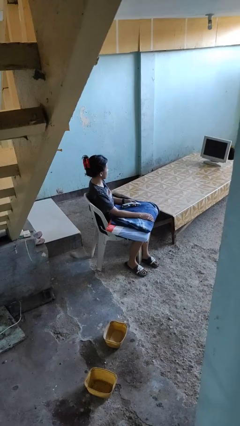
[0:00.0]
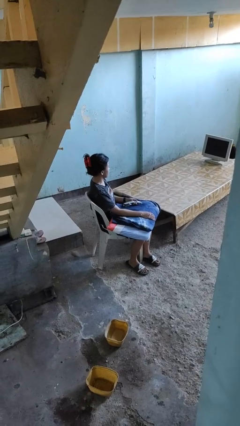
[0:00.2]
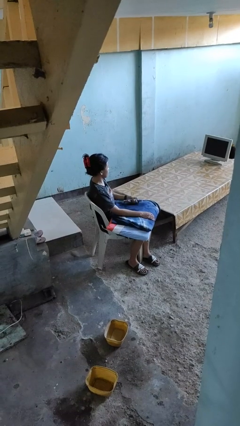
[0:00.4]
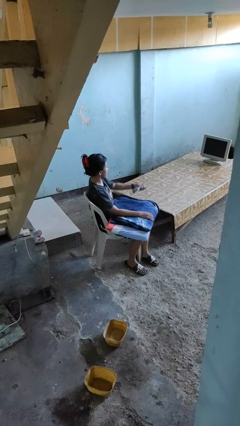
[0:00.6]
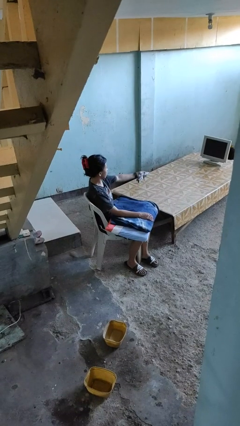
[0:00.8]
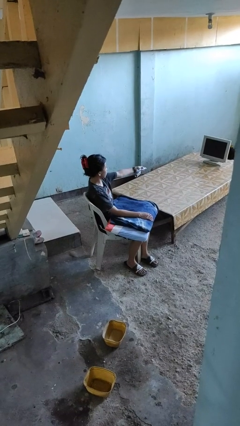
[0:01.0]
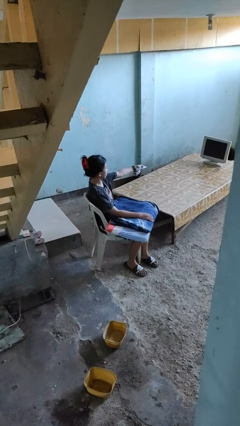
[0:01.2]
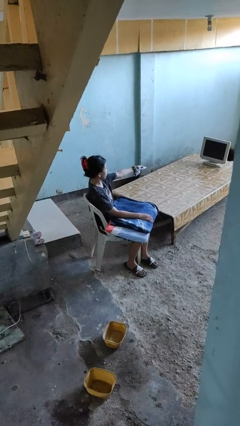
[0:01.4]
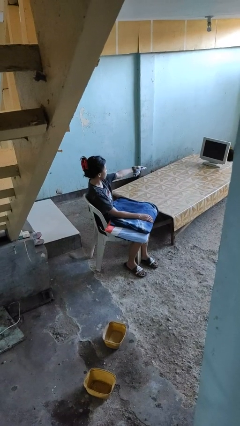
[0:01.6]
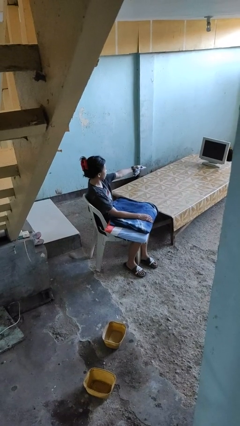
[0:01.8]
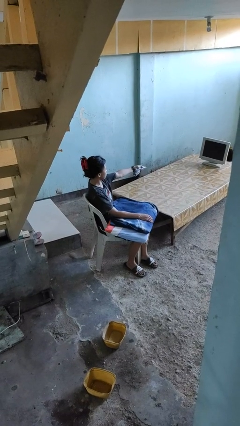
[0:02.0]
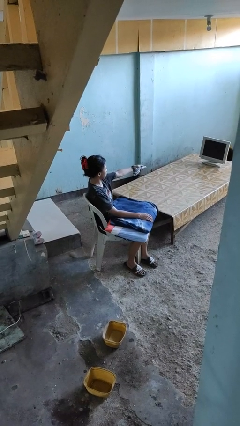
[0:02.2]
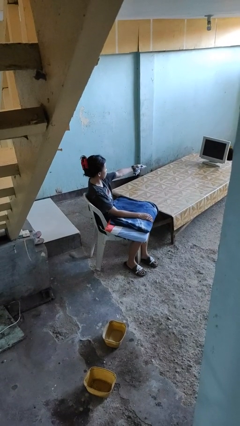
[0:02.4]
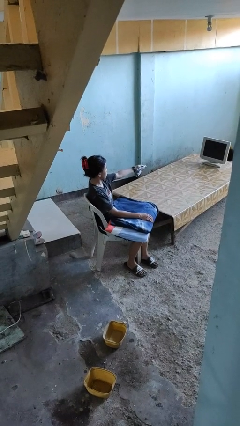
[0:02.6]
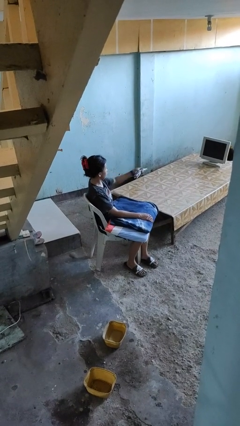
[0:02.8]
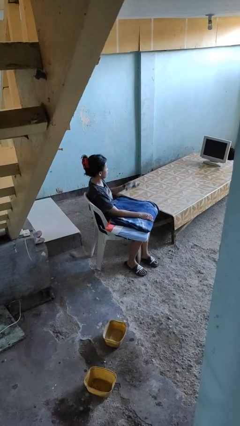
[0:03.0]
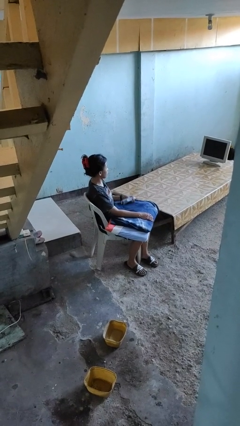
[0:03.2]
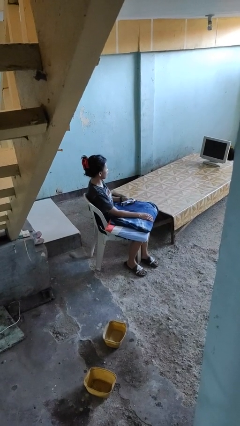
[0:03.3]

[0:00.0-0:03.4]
person uses television remote

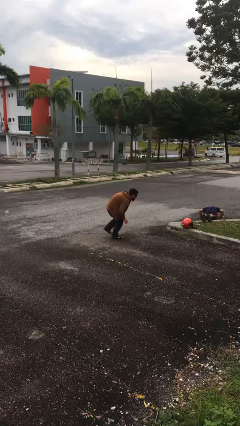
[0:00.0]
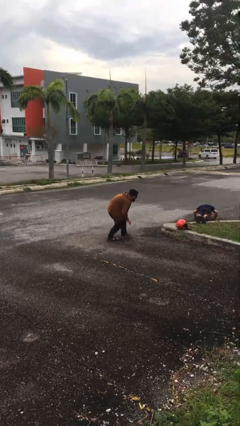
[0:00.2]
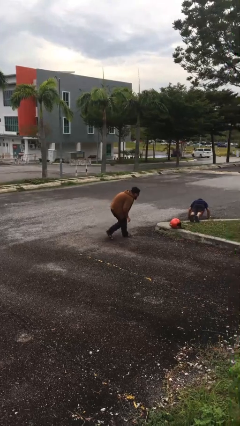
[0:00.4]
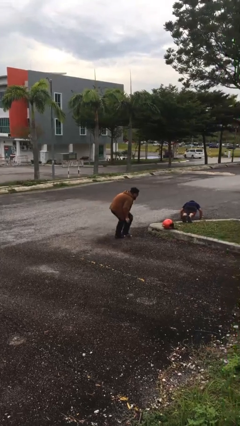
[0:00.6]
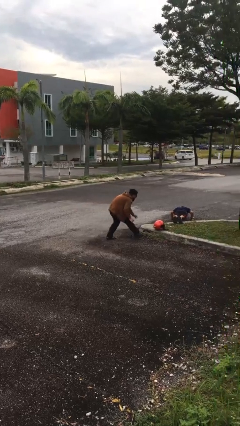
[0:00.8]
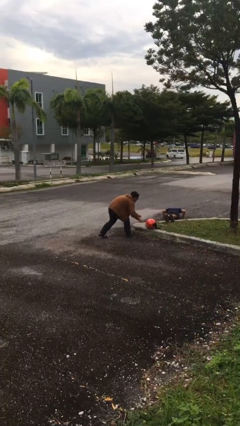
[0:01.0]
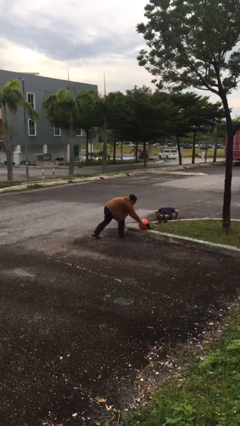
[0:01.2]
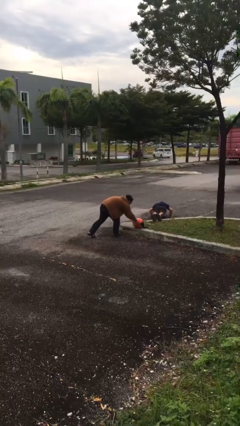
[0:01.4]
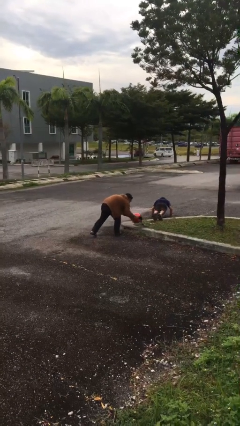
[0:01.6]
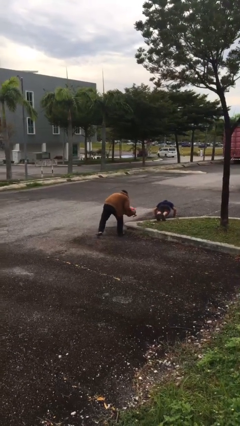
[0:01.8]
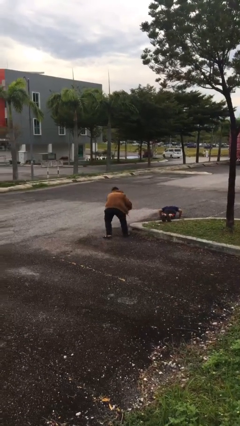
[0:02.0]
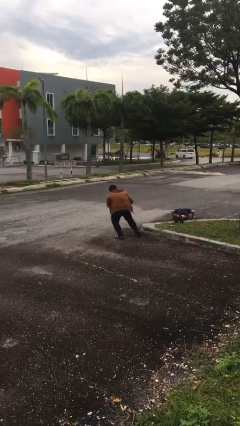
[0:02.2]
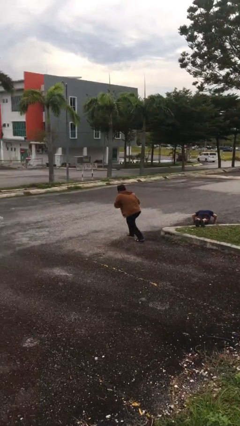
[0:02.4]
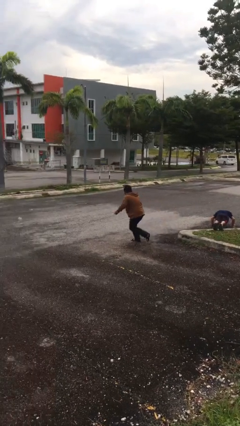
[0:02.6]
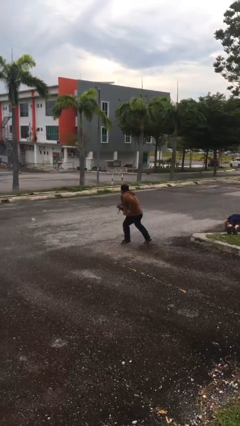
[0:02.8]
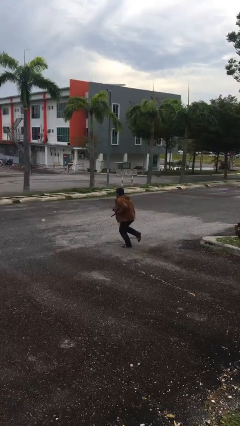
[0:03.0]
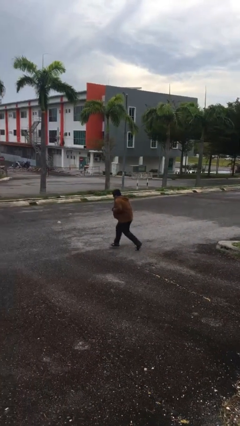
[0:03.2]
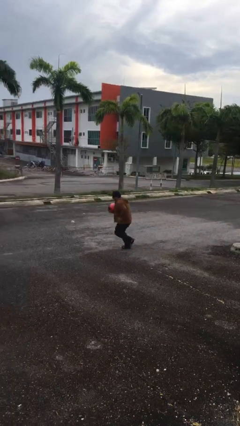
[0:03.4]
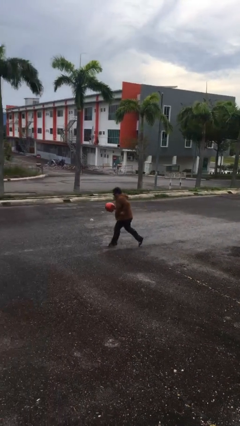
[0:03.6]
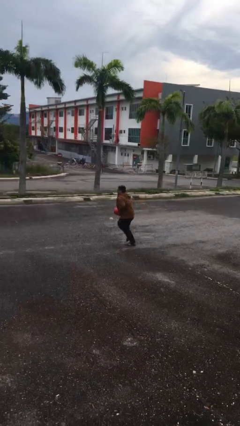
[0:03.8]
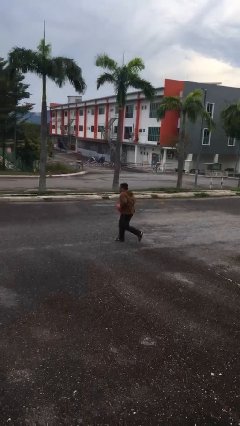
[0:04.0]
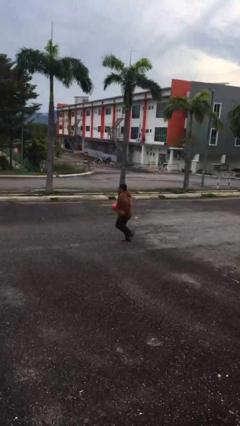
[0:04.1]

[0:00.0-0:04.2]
person steals object from person

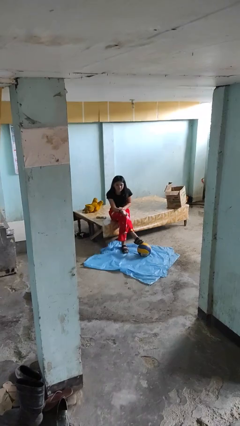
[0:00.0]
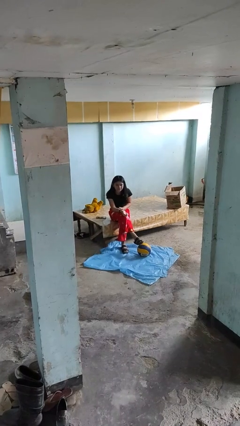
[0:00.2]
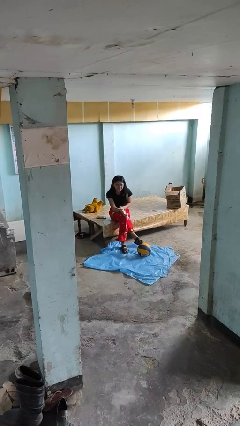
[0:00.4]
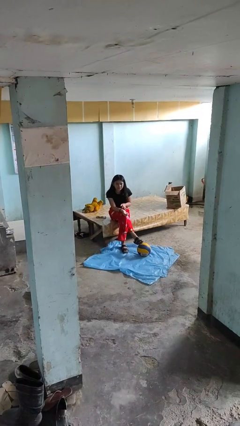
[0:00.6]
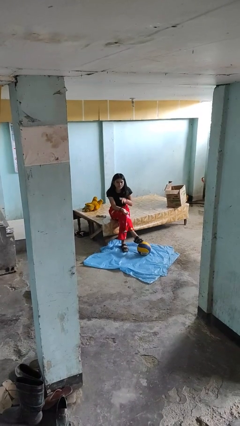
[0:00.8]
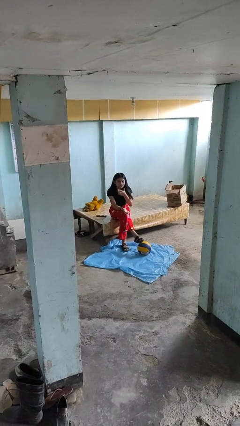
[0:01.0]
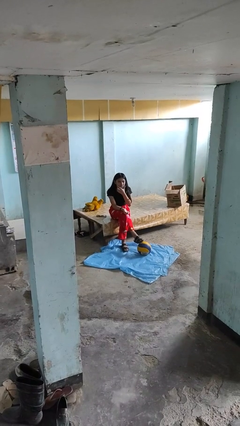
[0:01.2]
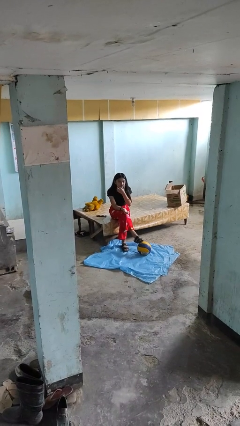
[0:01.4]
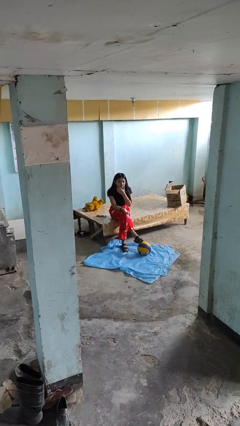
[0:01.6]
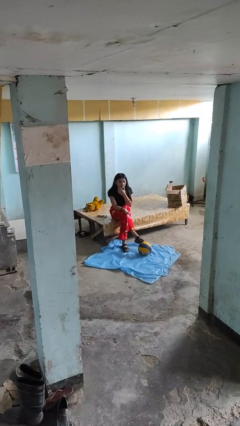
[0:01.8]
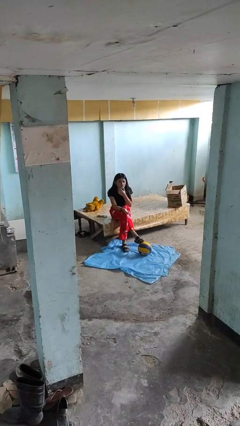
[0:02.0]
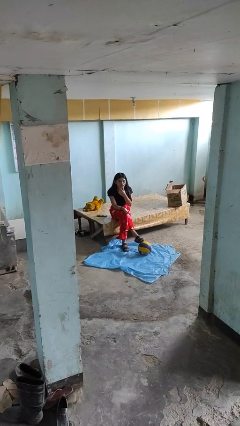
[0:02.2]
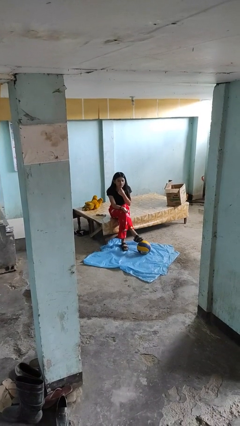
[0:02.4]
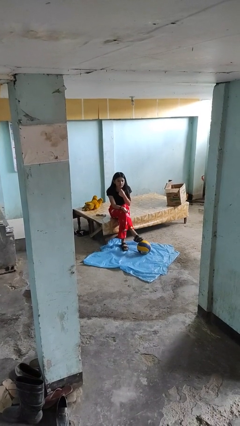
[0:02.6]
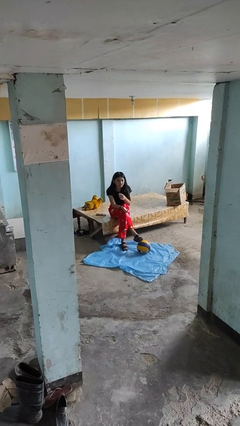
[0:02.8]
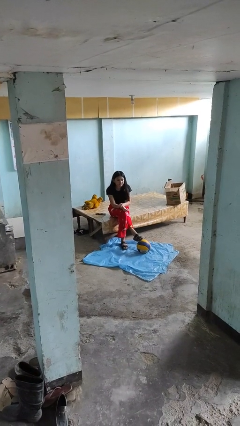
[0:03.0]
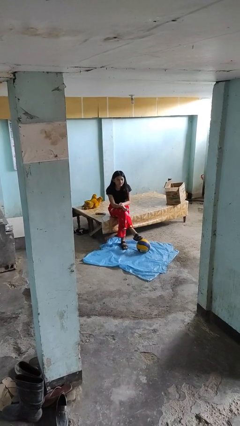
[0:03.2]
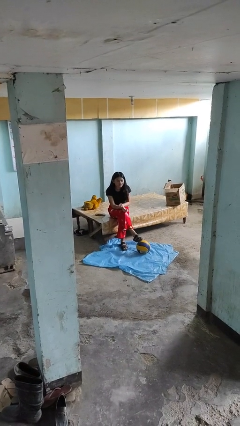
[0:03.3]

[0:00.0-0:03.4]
person strokes chin

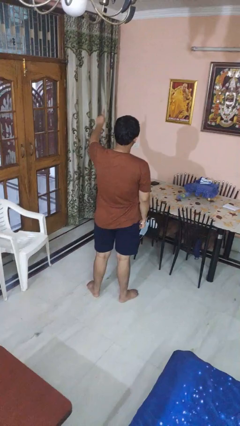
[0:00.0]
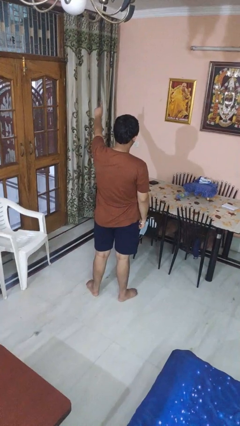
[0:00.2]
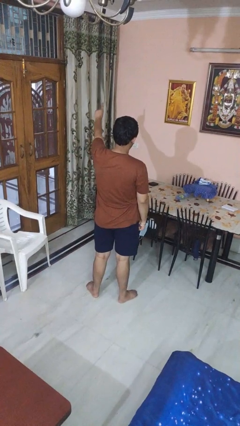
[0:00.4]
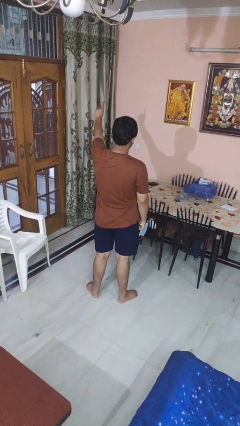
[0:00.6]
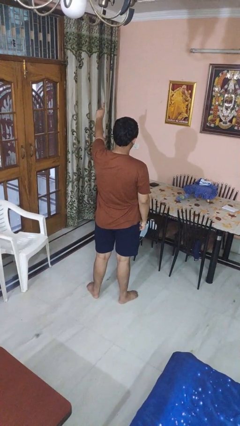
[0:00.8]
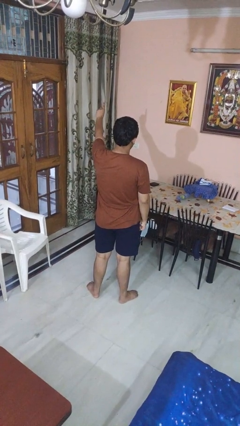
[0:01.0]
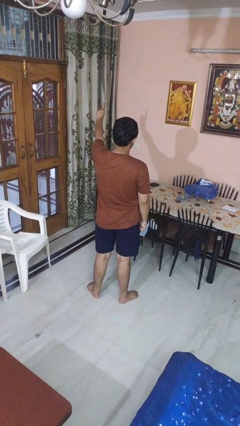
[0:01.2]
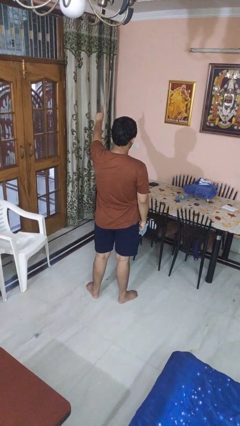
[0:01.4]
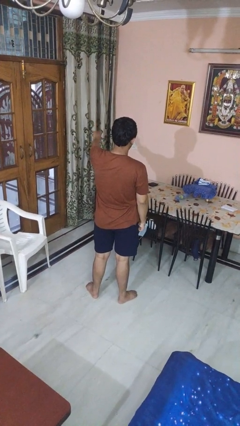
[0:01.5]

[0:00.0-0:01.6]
person gestures number one

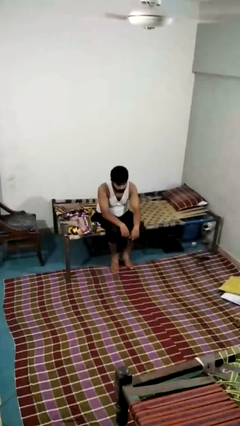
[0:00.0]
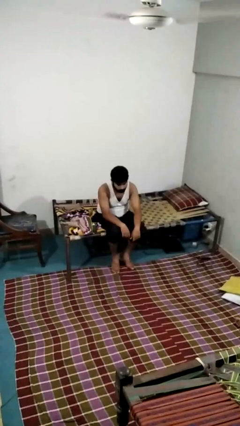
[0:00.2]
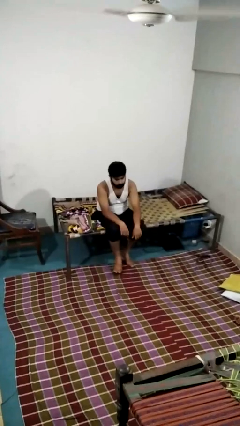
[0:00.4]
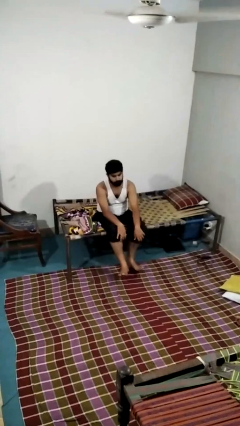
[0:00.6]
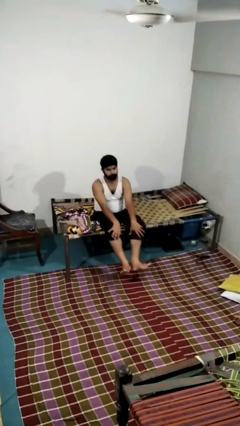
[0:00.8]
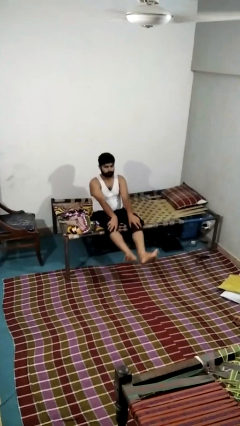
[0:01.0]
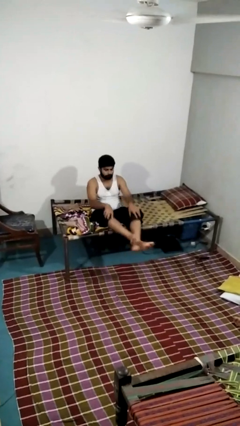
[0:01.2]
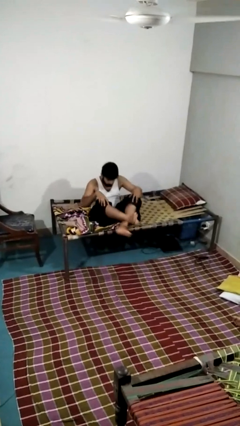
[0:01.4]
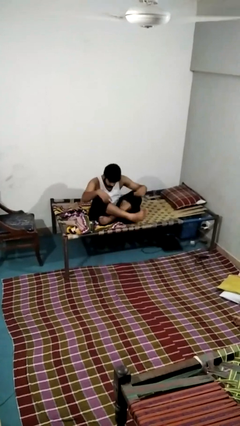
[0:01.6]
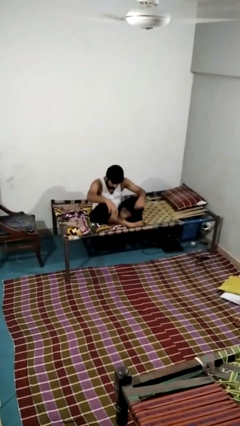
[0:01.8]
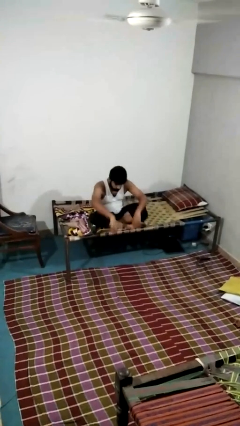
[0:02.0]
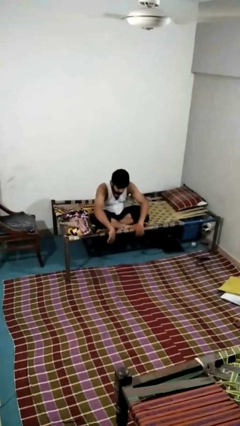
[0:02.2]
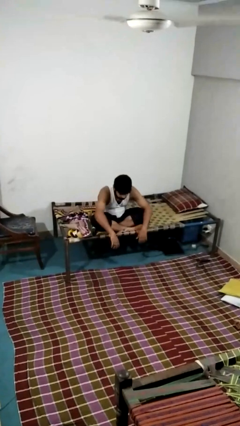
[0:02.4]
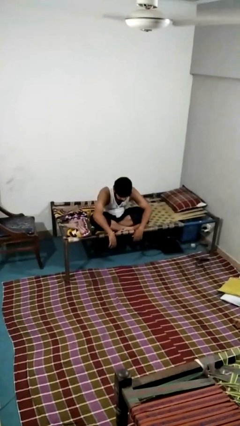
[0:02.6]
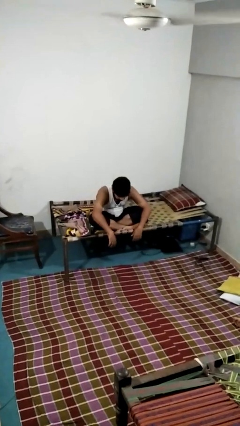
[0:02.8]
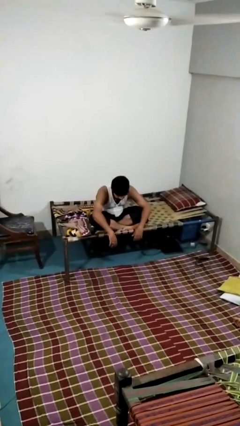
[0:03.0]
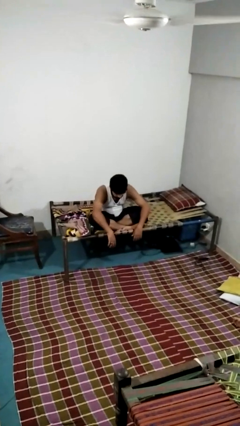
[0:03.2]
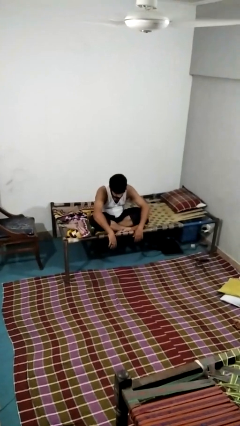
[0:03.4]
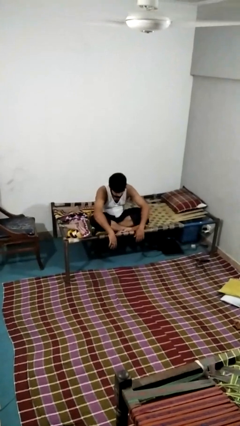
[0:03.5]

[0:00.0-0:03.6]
person crosses legs

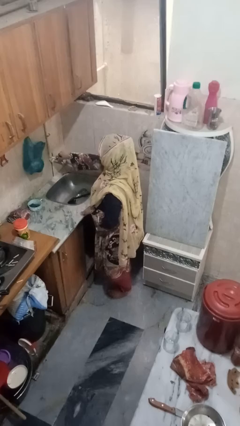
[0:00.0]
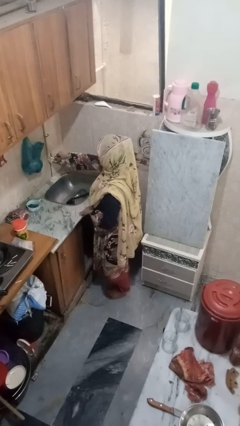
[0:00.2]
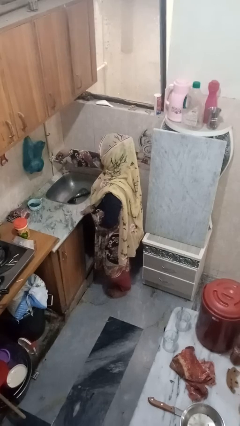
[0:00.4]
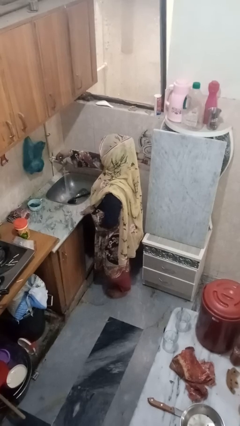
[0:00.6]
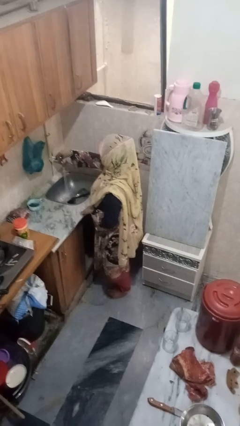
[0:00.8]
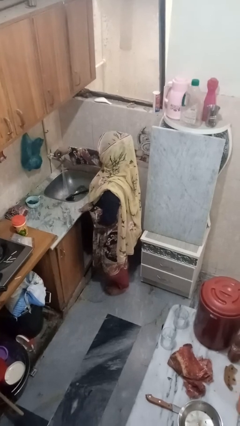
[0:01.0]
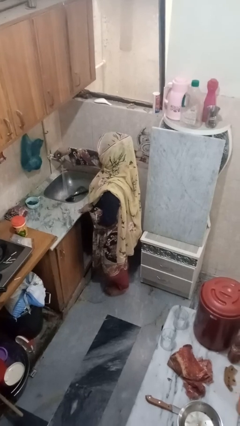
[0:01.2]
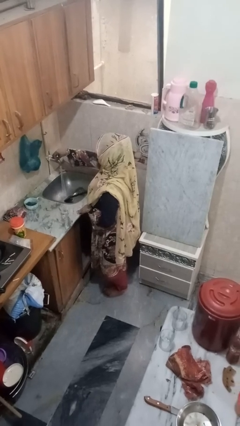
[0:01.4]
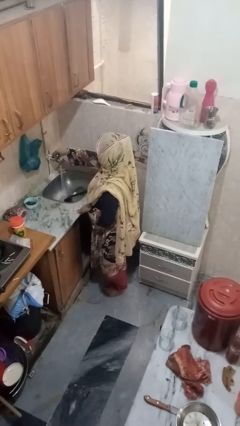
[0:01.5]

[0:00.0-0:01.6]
person turns on faucet
